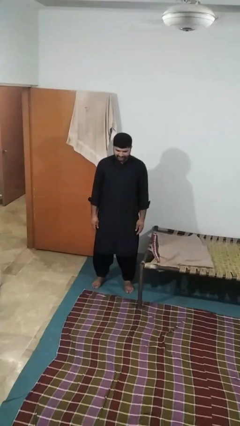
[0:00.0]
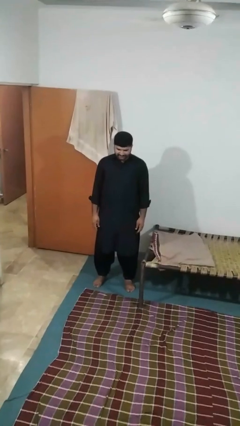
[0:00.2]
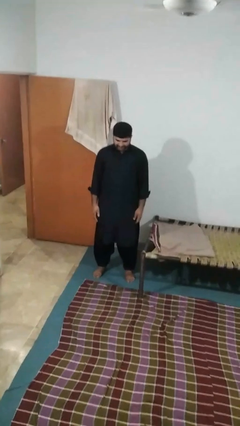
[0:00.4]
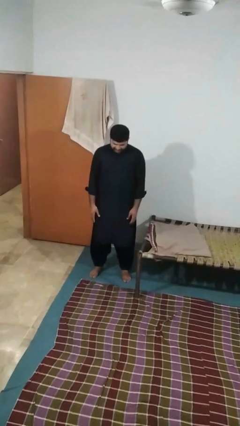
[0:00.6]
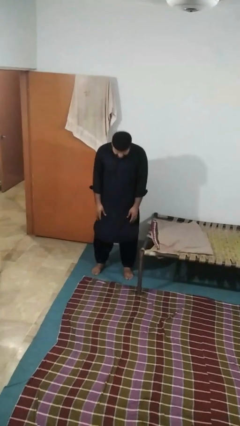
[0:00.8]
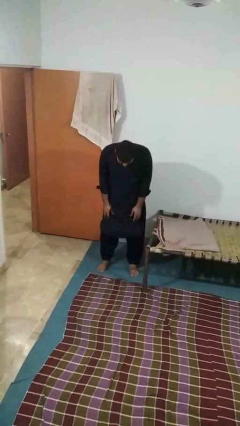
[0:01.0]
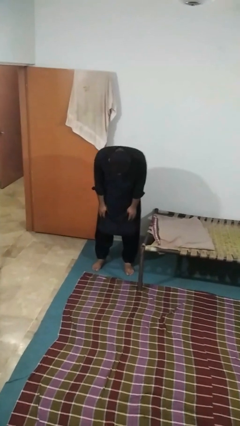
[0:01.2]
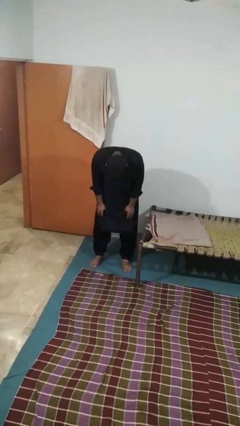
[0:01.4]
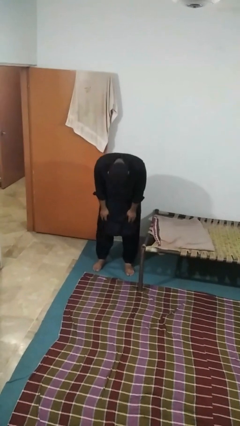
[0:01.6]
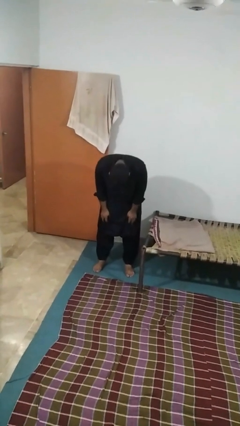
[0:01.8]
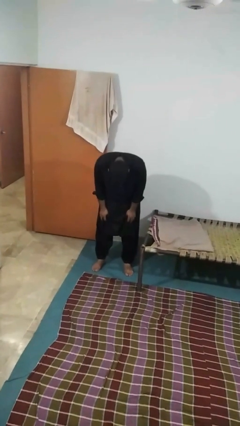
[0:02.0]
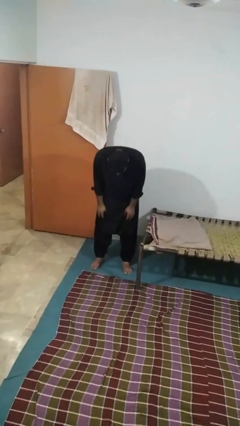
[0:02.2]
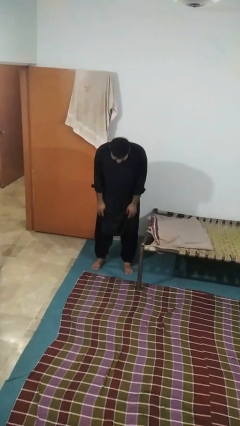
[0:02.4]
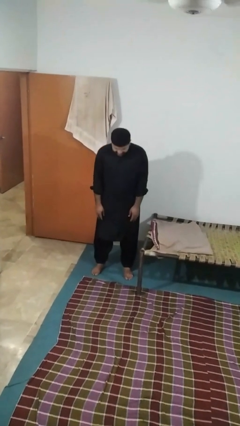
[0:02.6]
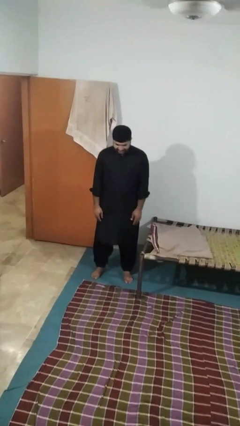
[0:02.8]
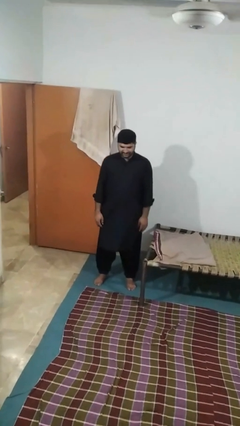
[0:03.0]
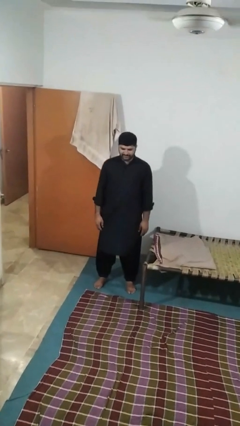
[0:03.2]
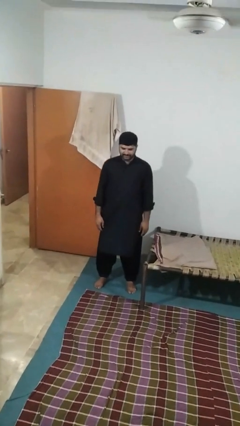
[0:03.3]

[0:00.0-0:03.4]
person bows

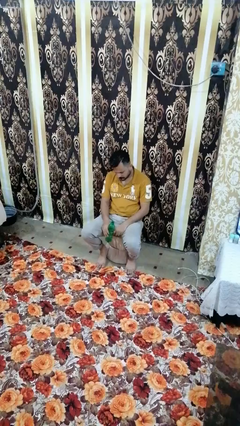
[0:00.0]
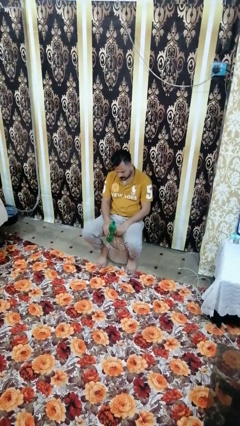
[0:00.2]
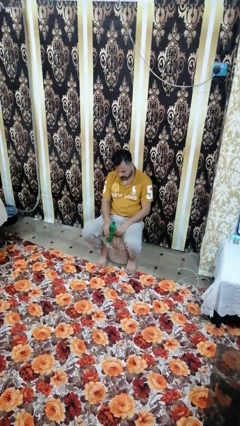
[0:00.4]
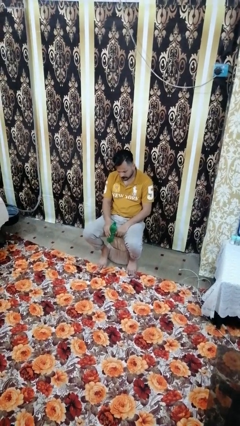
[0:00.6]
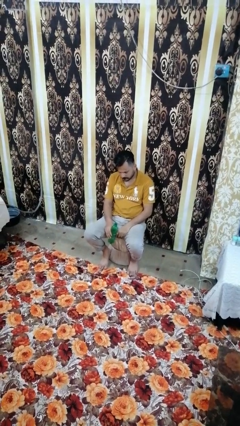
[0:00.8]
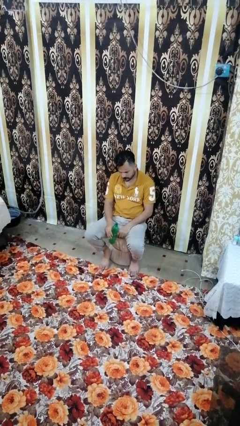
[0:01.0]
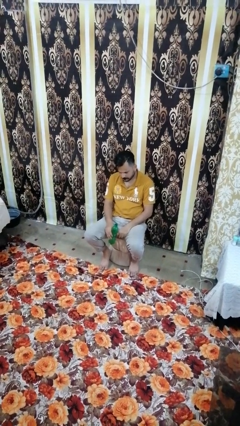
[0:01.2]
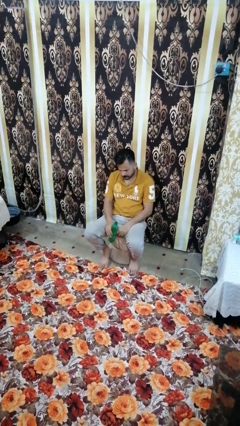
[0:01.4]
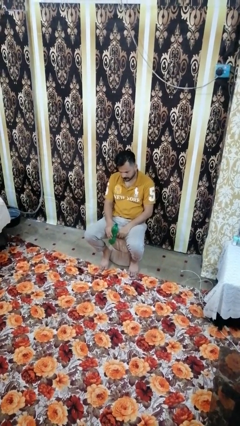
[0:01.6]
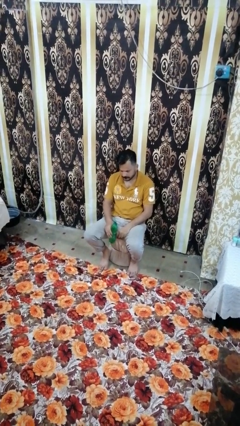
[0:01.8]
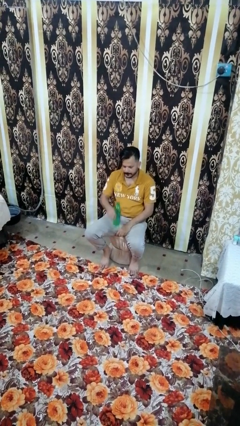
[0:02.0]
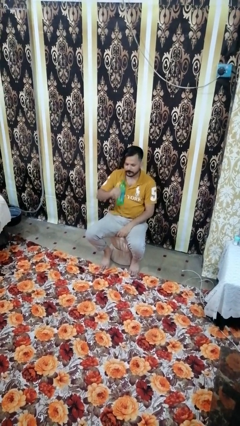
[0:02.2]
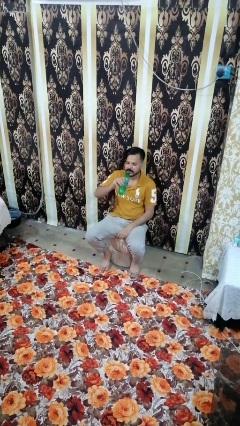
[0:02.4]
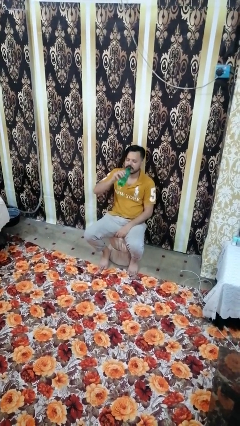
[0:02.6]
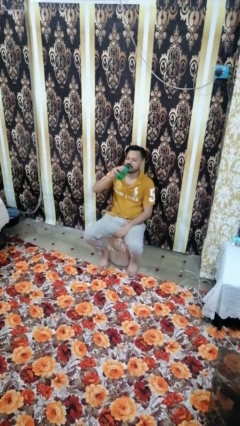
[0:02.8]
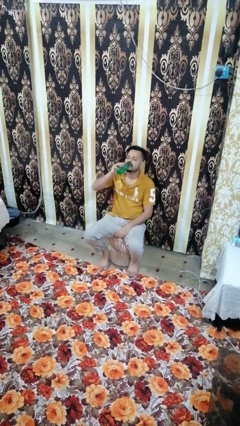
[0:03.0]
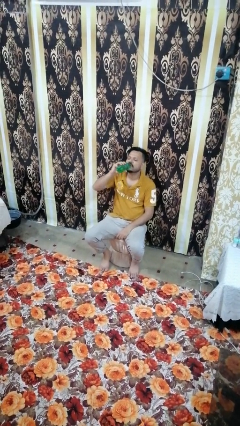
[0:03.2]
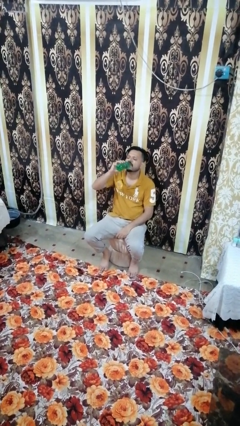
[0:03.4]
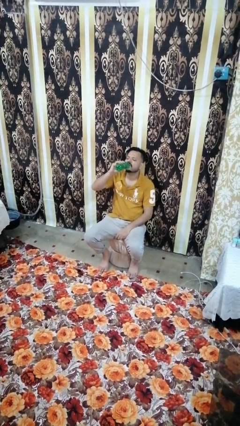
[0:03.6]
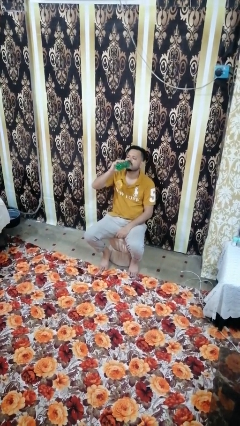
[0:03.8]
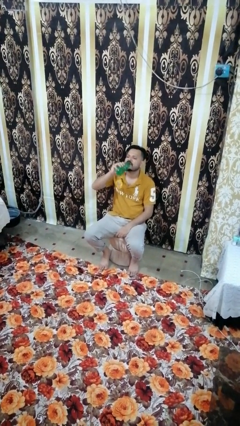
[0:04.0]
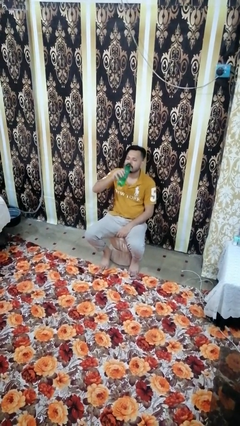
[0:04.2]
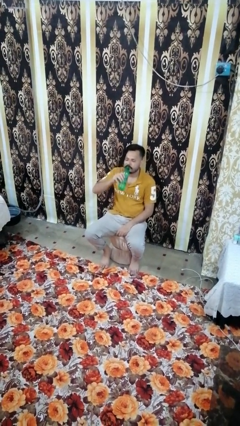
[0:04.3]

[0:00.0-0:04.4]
person drinks from bottle

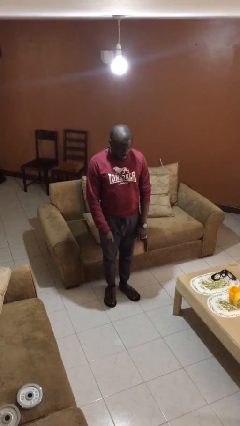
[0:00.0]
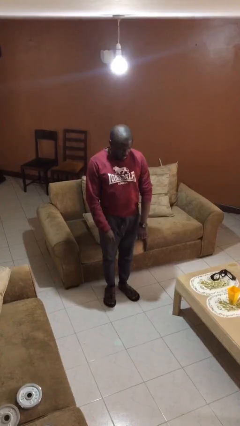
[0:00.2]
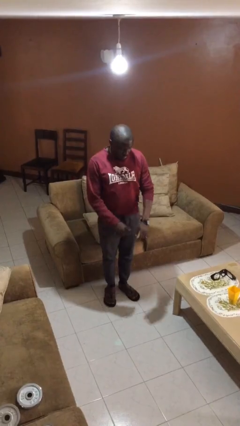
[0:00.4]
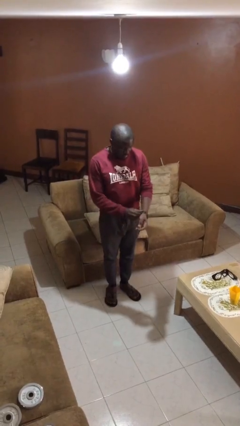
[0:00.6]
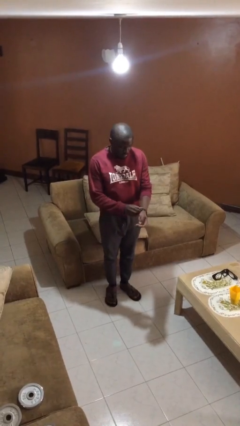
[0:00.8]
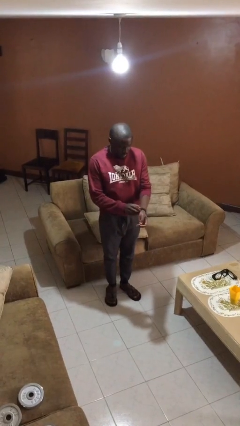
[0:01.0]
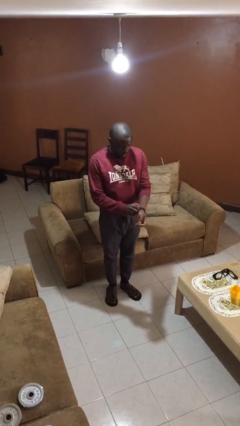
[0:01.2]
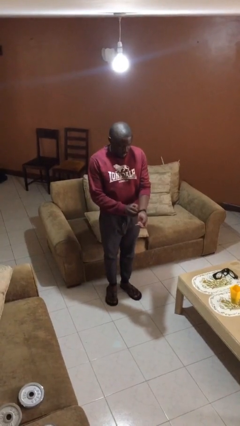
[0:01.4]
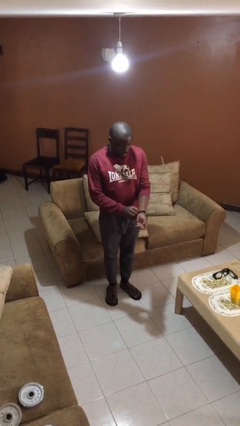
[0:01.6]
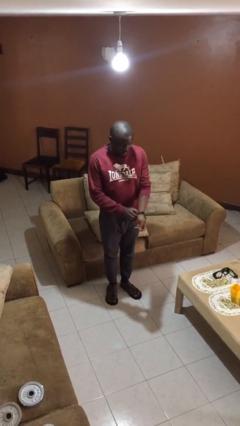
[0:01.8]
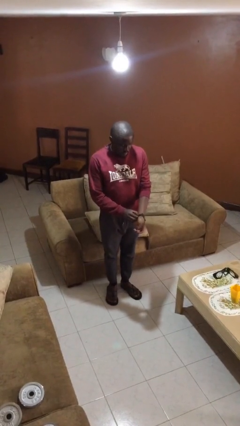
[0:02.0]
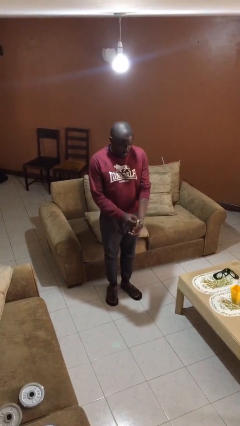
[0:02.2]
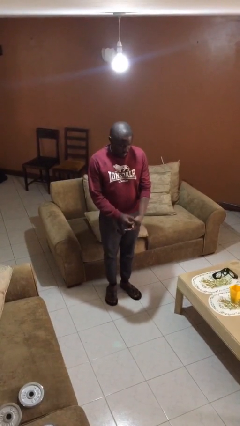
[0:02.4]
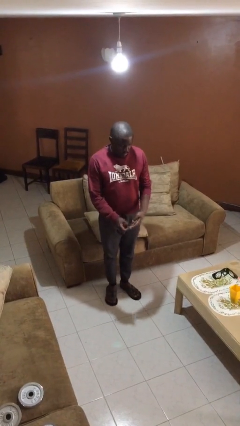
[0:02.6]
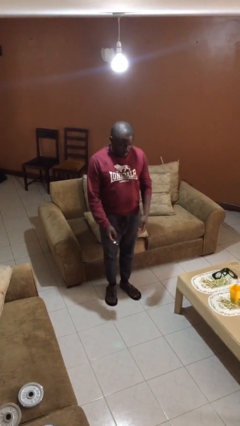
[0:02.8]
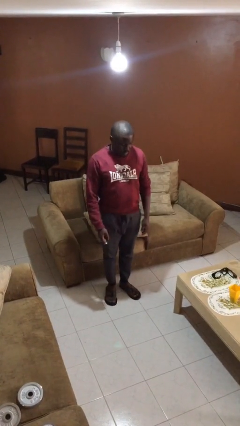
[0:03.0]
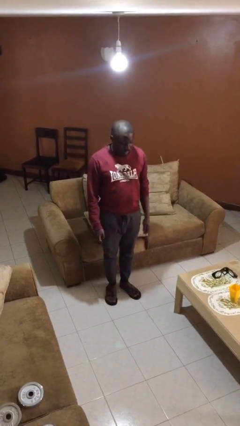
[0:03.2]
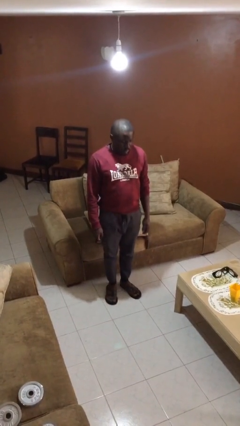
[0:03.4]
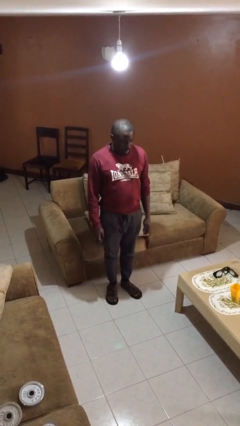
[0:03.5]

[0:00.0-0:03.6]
person takes off wristwatch

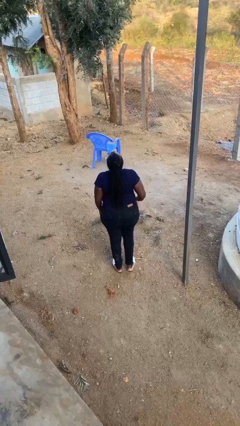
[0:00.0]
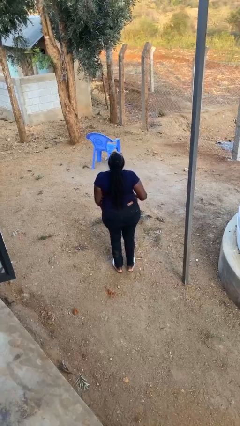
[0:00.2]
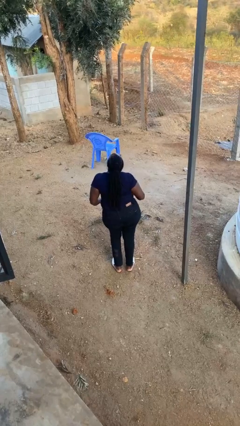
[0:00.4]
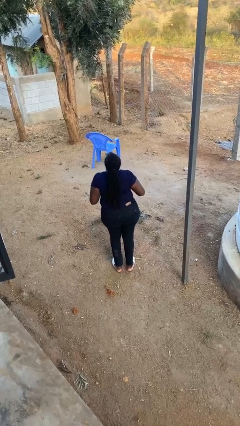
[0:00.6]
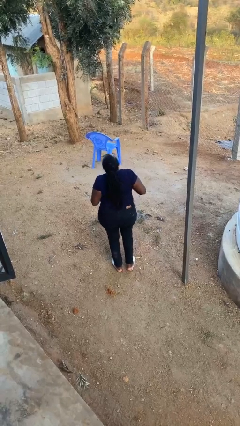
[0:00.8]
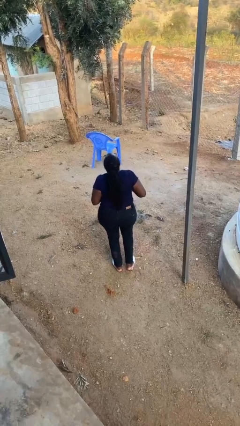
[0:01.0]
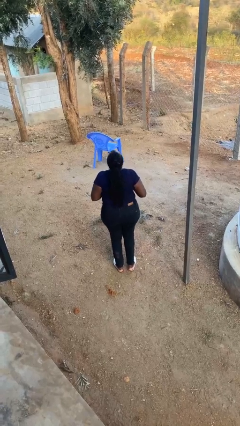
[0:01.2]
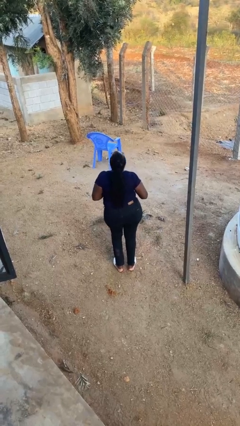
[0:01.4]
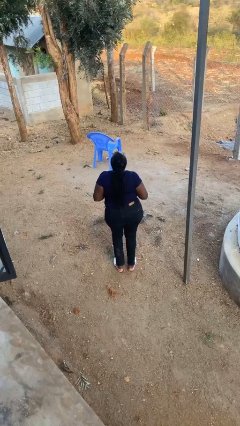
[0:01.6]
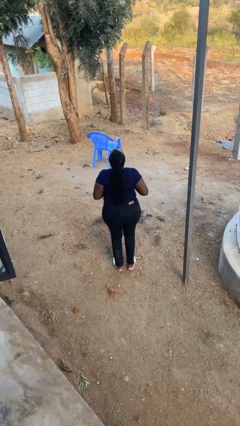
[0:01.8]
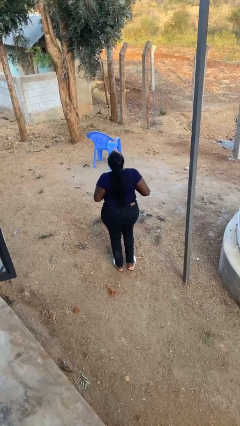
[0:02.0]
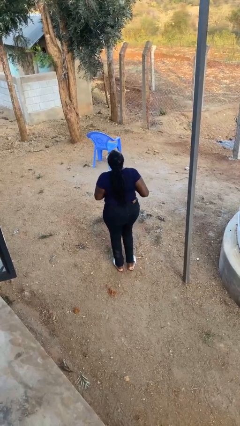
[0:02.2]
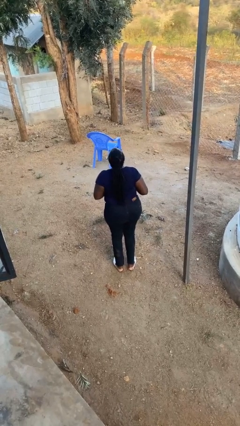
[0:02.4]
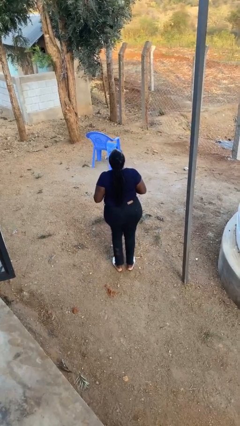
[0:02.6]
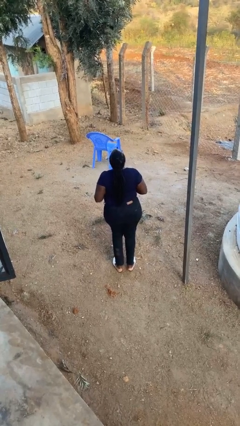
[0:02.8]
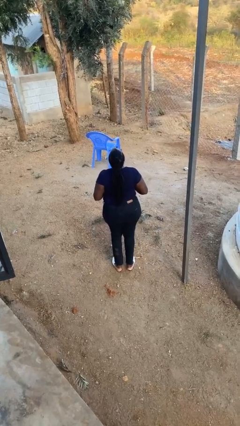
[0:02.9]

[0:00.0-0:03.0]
person wiggles hips

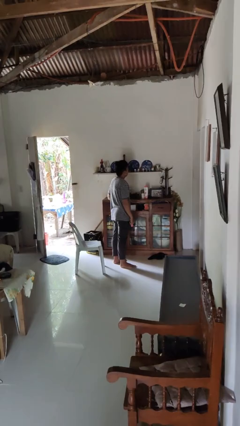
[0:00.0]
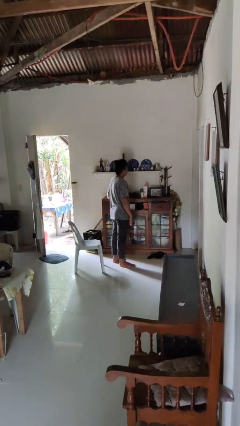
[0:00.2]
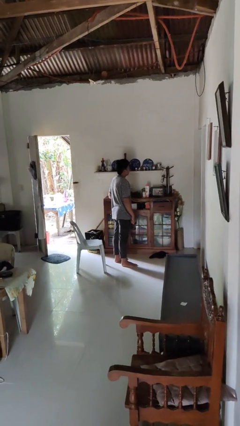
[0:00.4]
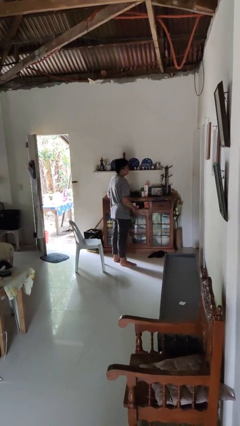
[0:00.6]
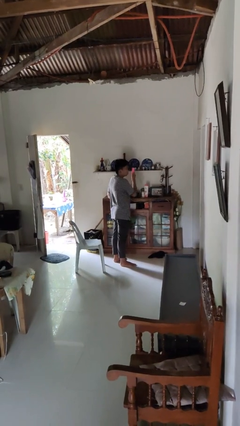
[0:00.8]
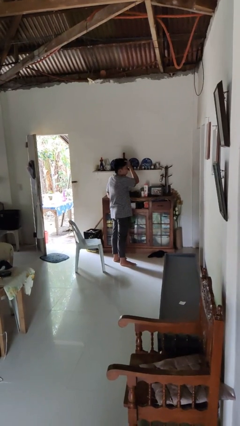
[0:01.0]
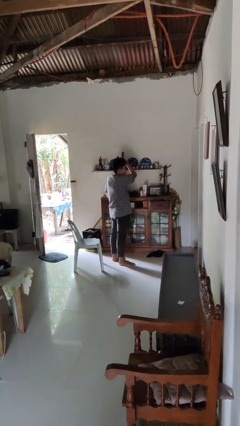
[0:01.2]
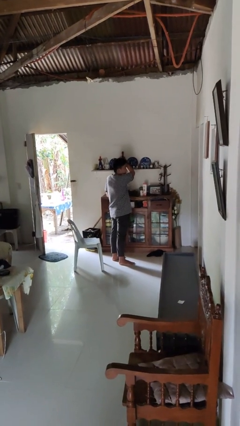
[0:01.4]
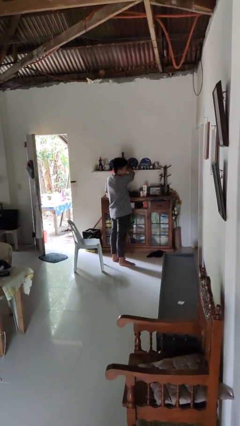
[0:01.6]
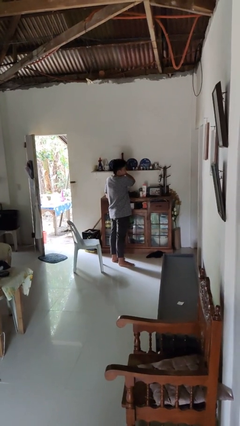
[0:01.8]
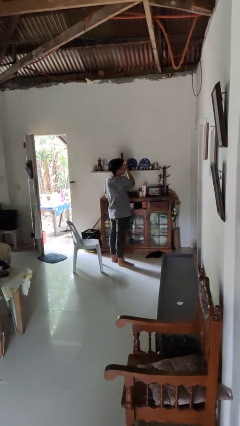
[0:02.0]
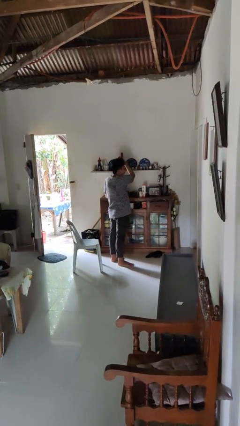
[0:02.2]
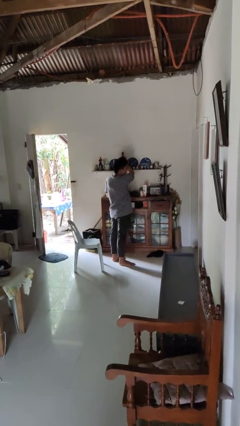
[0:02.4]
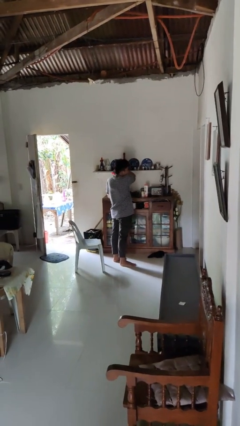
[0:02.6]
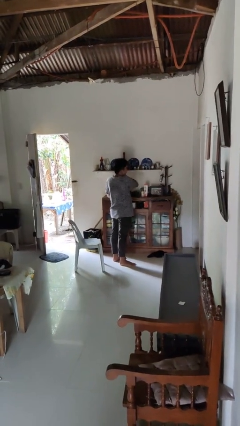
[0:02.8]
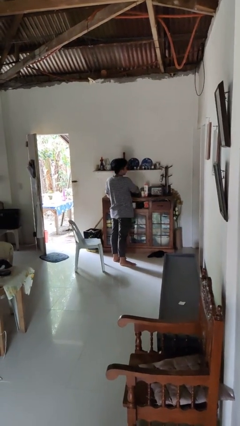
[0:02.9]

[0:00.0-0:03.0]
person brushes hair

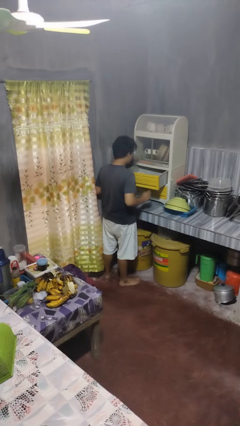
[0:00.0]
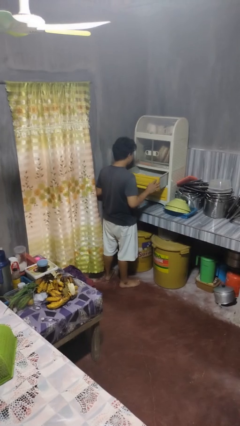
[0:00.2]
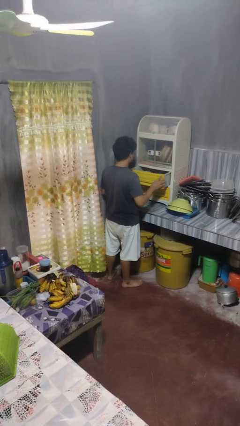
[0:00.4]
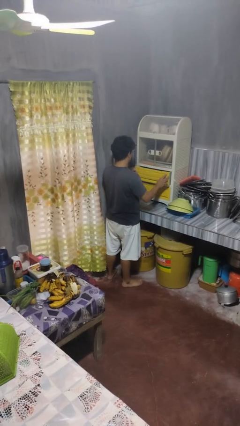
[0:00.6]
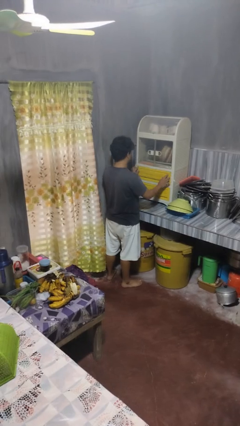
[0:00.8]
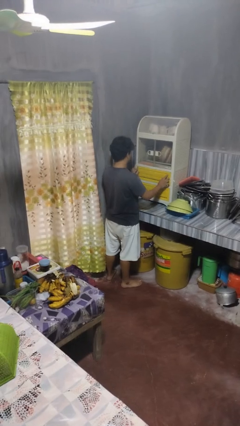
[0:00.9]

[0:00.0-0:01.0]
person closes kitchen drawer
